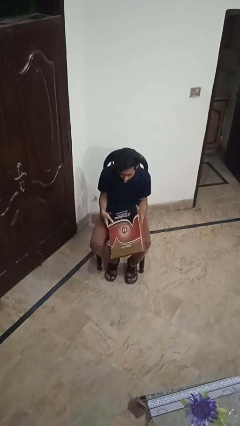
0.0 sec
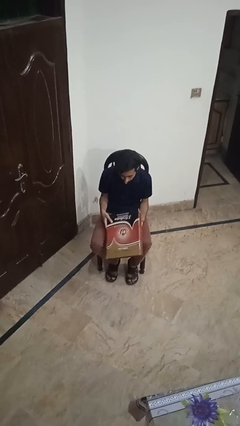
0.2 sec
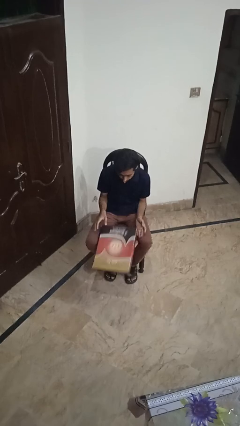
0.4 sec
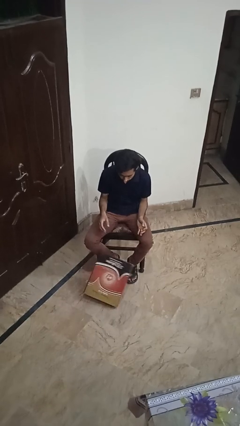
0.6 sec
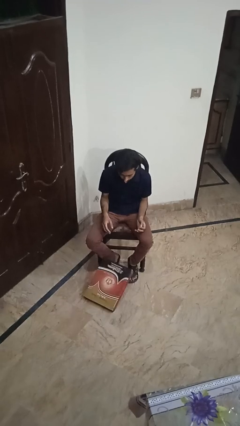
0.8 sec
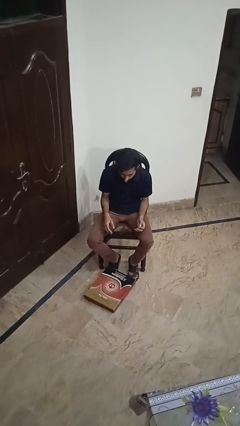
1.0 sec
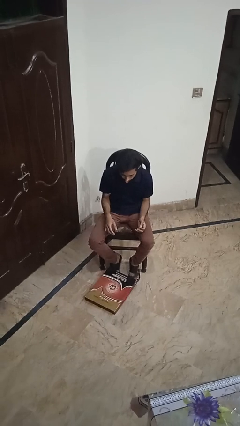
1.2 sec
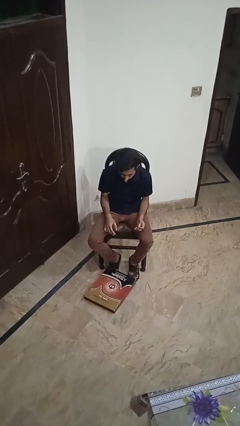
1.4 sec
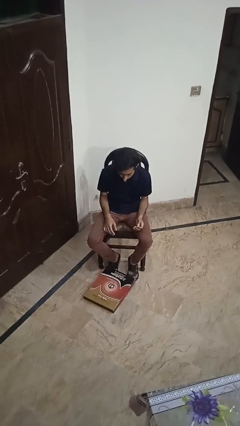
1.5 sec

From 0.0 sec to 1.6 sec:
person drops object

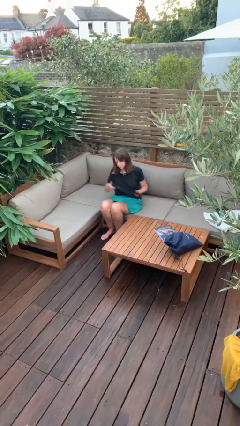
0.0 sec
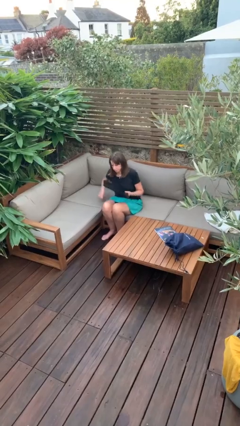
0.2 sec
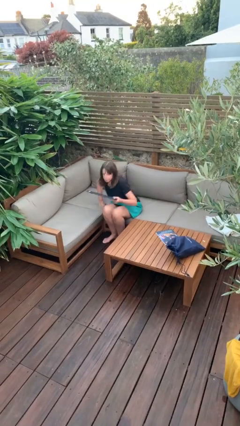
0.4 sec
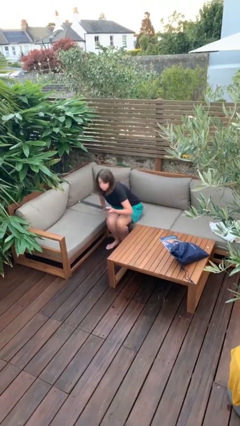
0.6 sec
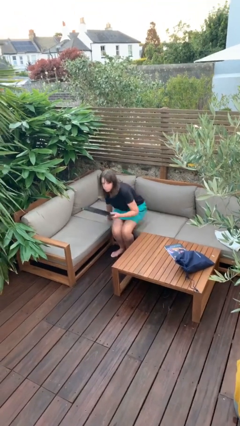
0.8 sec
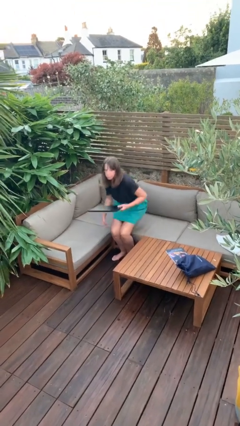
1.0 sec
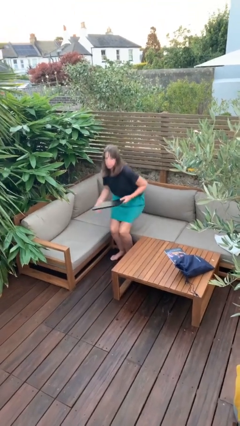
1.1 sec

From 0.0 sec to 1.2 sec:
person stands up

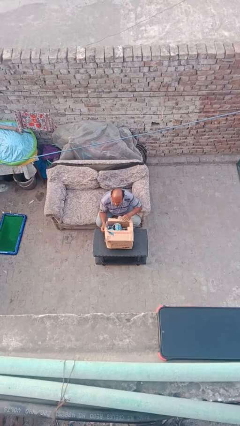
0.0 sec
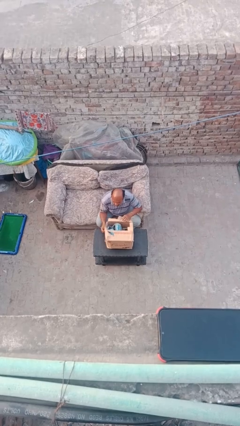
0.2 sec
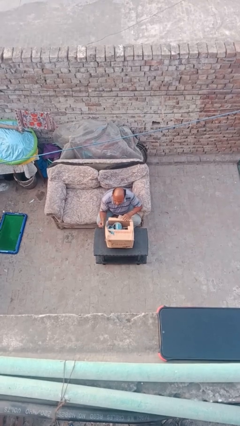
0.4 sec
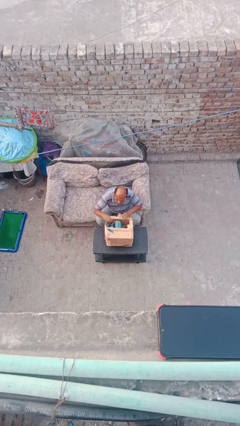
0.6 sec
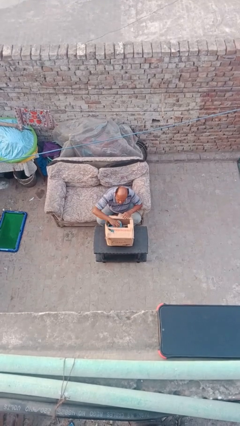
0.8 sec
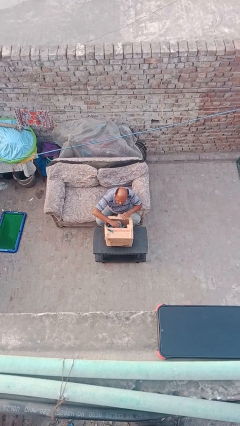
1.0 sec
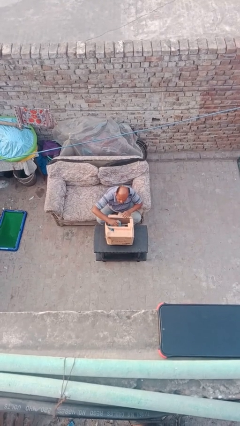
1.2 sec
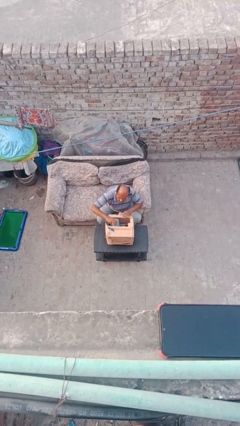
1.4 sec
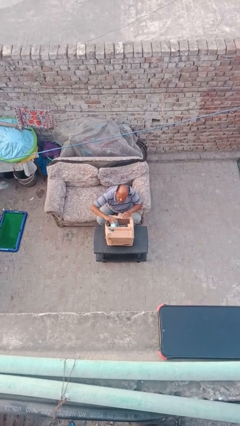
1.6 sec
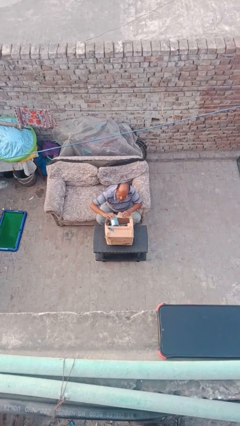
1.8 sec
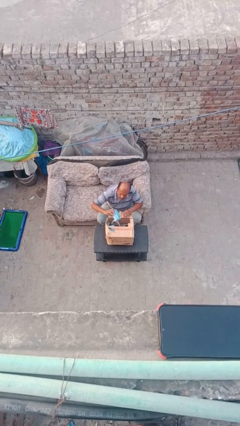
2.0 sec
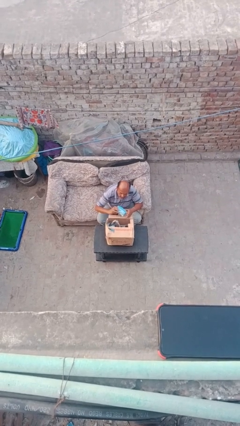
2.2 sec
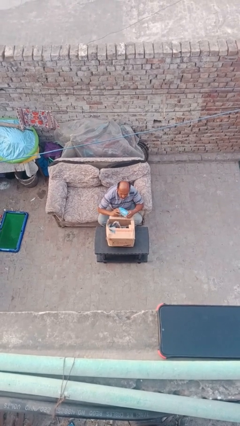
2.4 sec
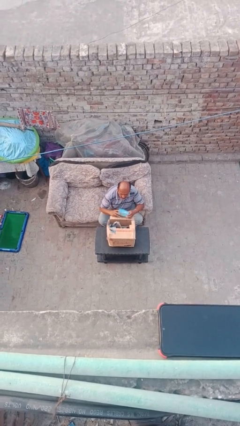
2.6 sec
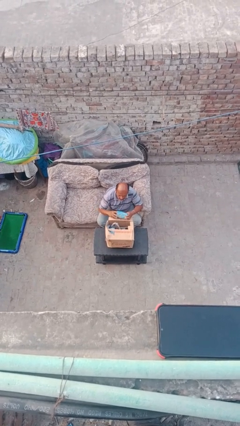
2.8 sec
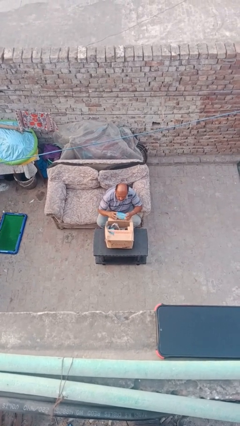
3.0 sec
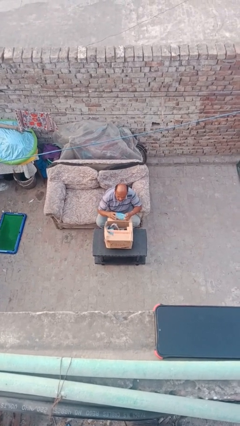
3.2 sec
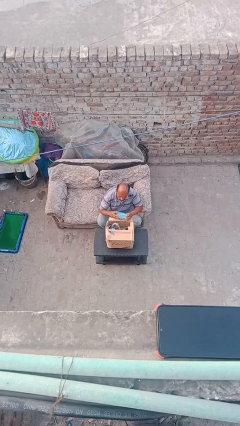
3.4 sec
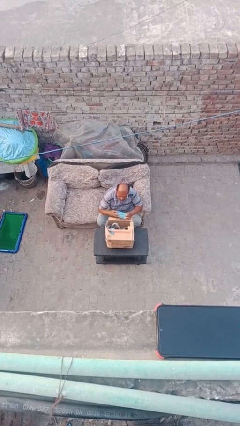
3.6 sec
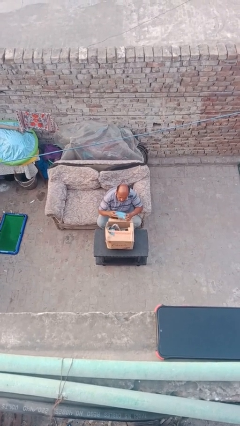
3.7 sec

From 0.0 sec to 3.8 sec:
person takes object from box

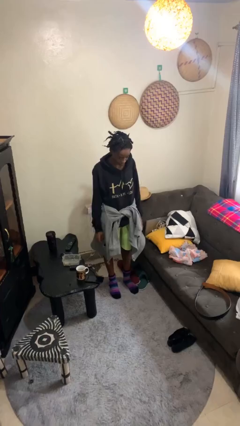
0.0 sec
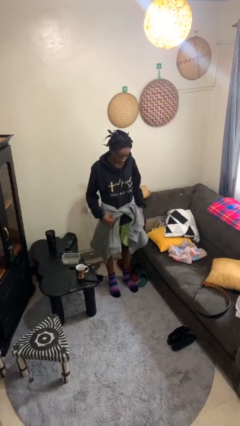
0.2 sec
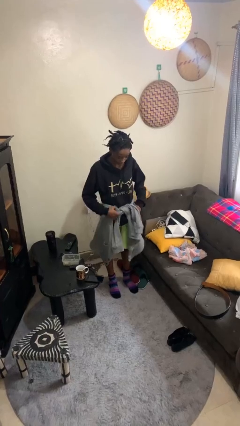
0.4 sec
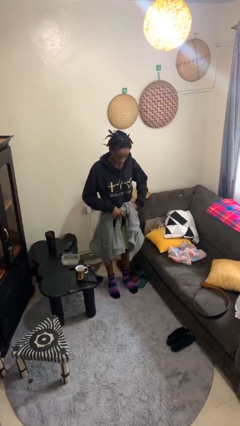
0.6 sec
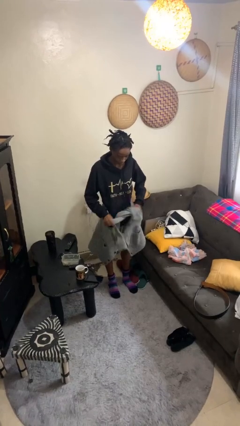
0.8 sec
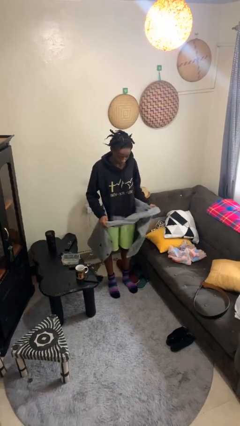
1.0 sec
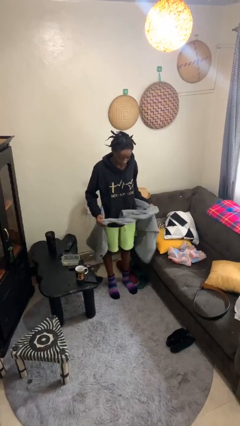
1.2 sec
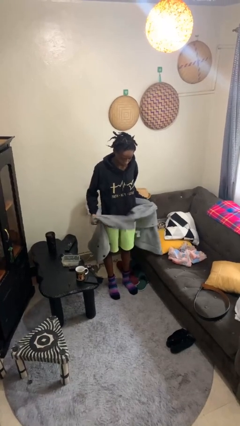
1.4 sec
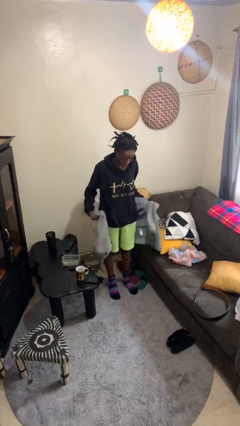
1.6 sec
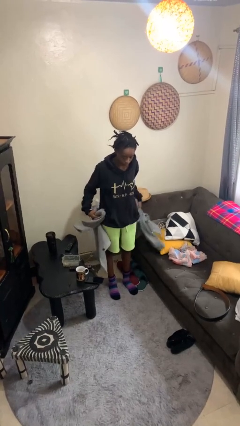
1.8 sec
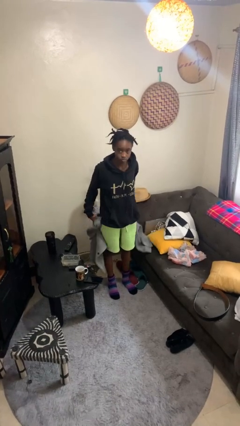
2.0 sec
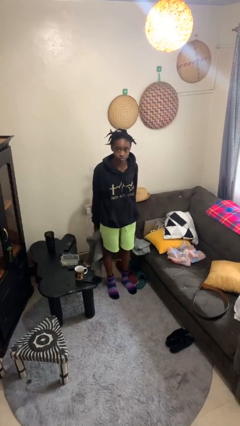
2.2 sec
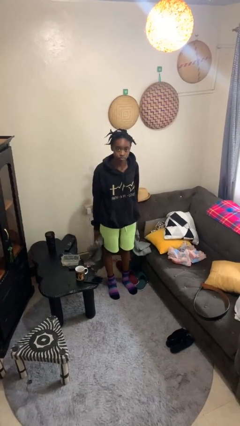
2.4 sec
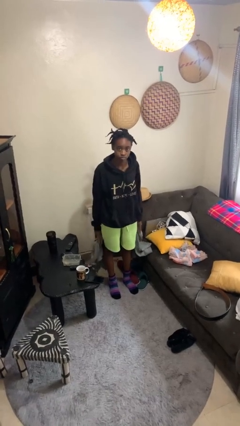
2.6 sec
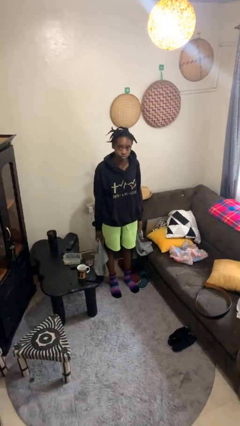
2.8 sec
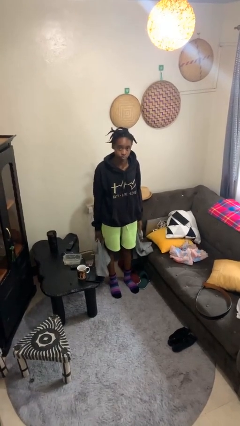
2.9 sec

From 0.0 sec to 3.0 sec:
person unties jacket around waist

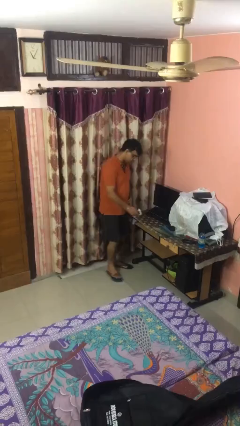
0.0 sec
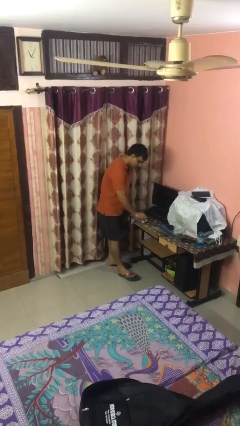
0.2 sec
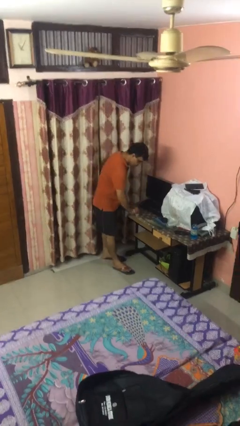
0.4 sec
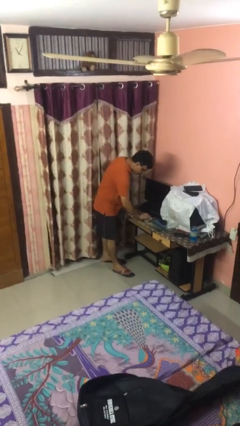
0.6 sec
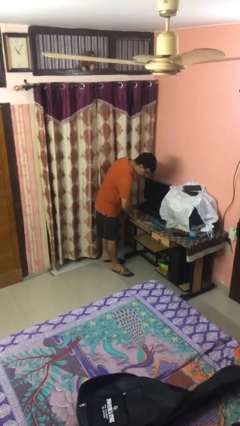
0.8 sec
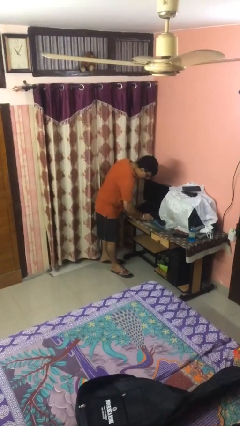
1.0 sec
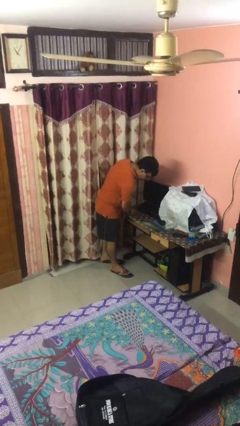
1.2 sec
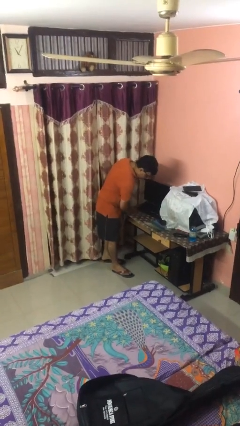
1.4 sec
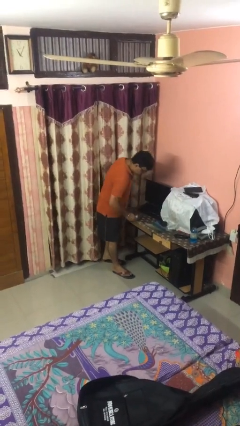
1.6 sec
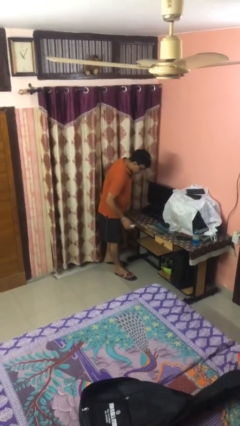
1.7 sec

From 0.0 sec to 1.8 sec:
person cleans table with rag

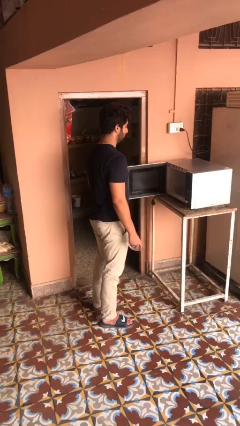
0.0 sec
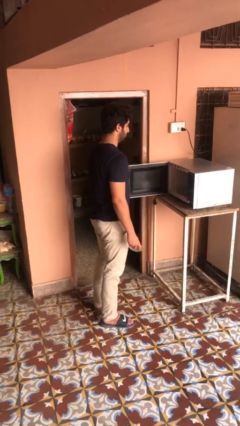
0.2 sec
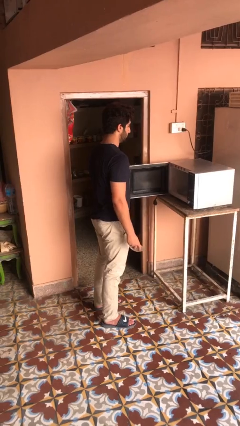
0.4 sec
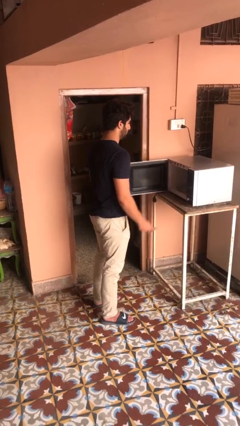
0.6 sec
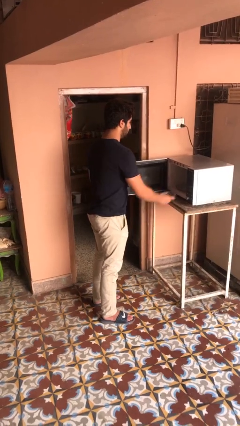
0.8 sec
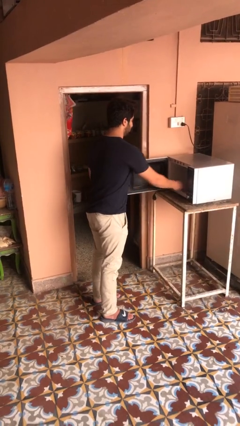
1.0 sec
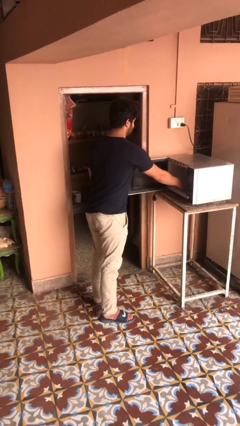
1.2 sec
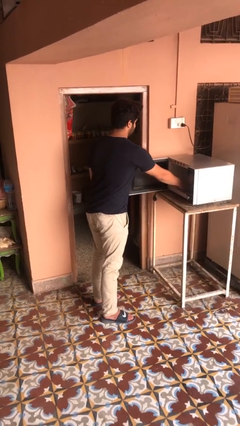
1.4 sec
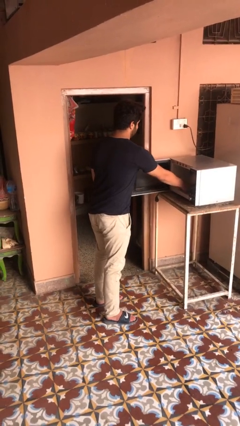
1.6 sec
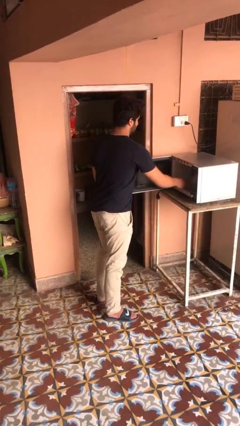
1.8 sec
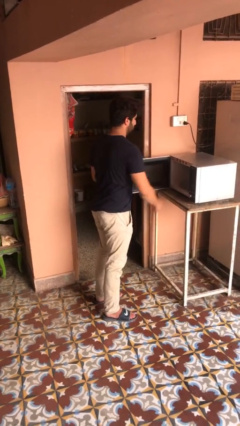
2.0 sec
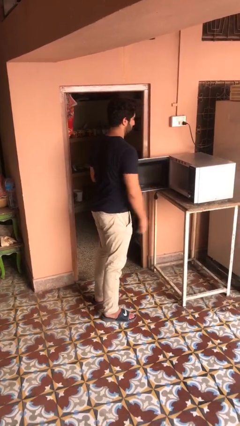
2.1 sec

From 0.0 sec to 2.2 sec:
person puts object into microwave

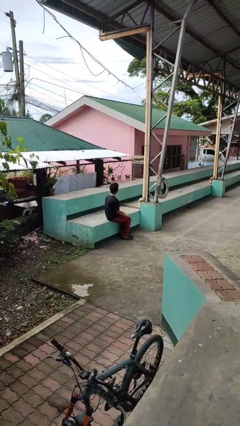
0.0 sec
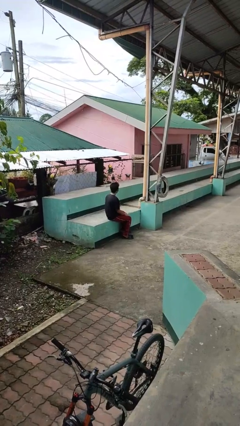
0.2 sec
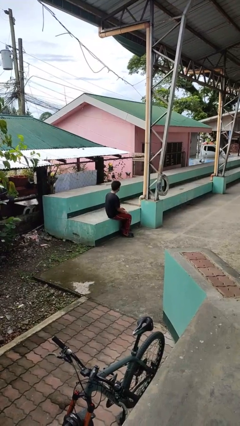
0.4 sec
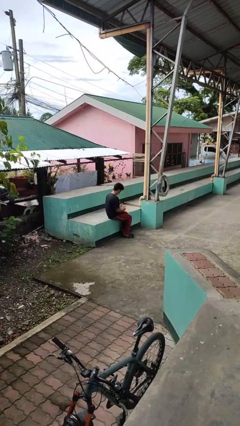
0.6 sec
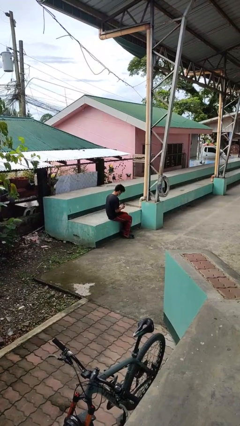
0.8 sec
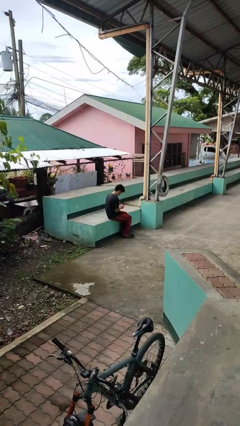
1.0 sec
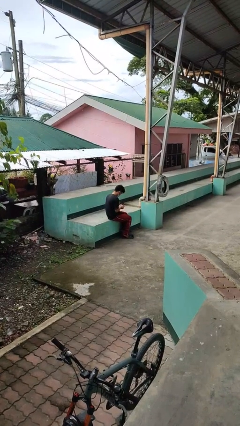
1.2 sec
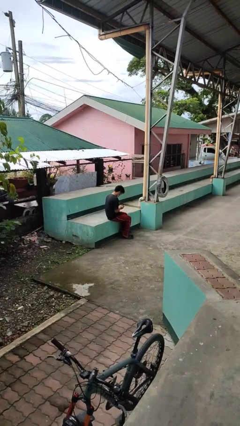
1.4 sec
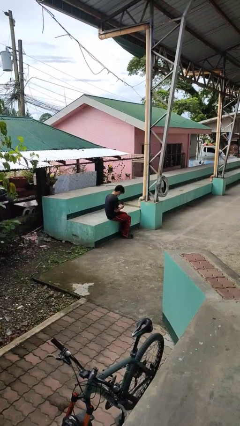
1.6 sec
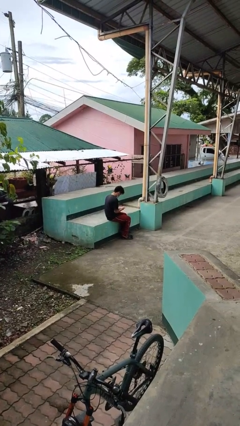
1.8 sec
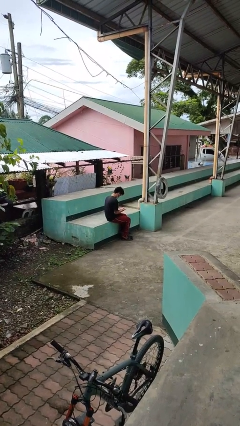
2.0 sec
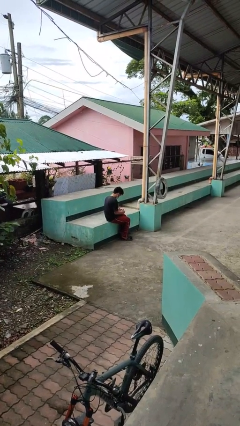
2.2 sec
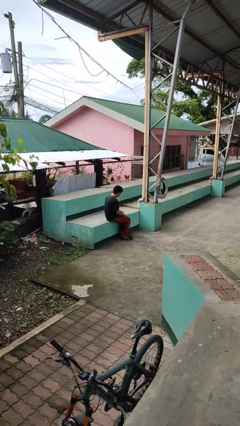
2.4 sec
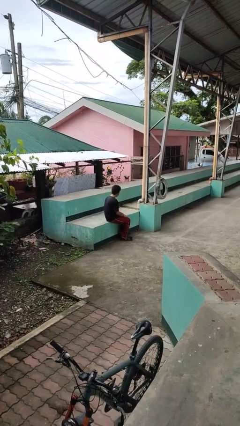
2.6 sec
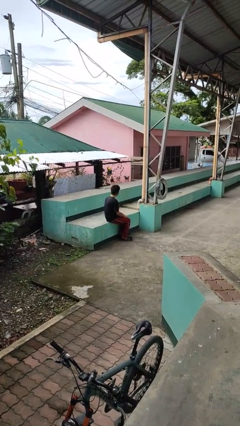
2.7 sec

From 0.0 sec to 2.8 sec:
person looks at hands in lap

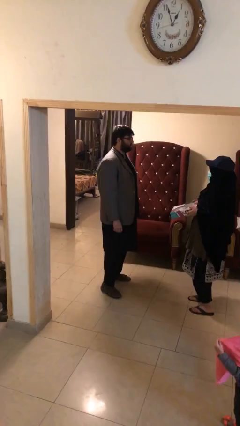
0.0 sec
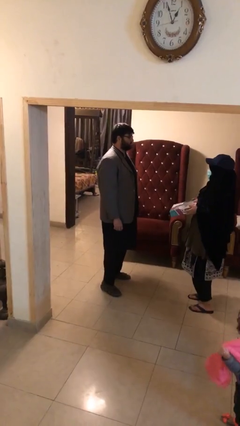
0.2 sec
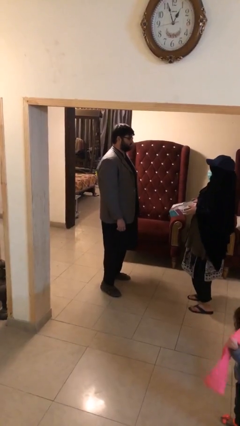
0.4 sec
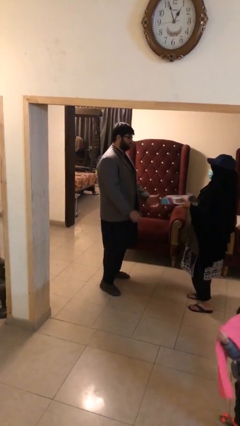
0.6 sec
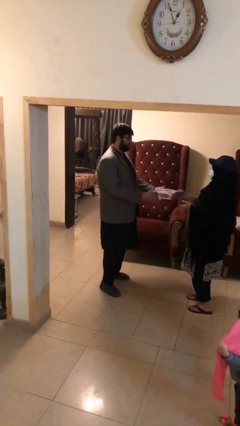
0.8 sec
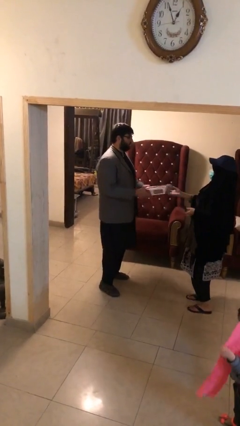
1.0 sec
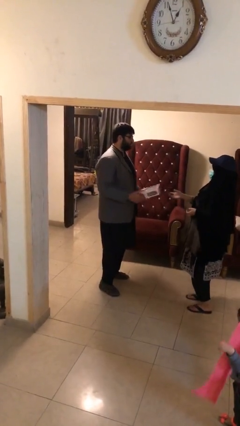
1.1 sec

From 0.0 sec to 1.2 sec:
person transfers object to person
